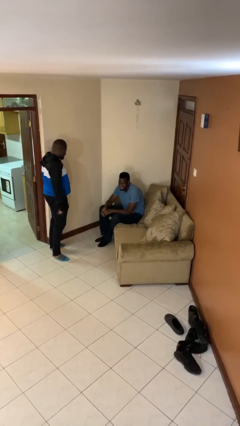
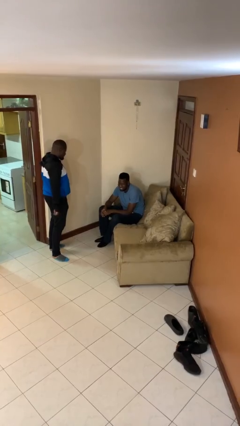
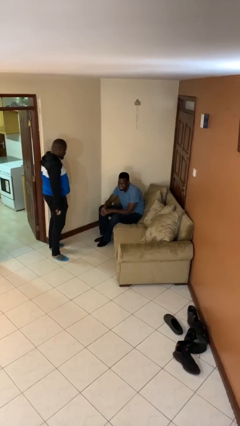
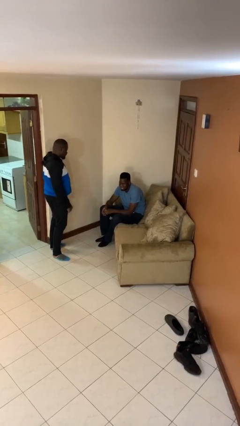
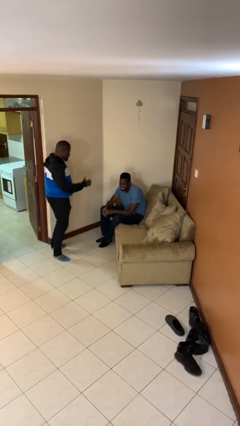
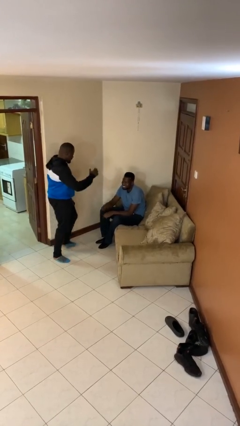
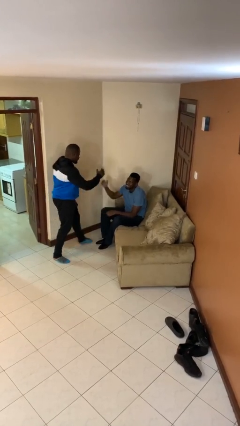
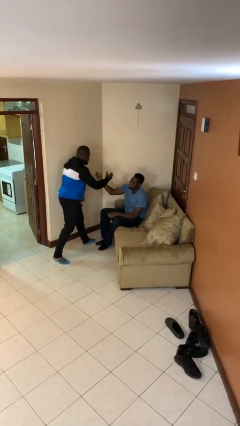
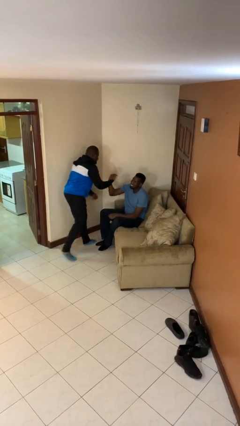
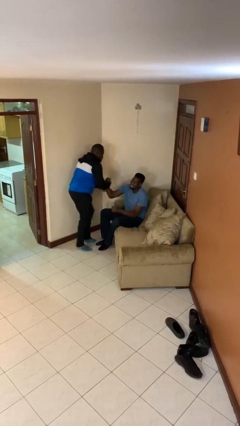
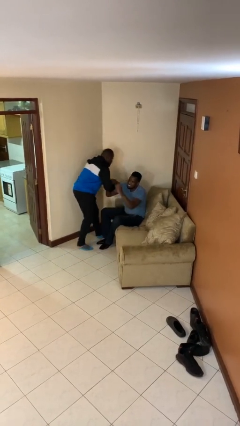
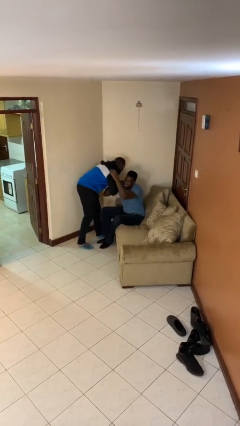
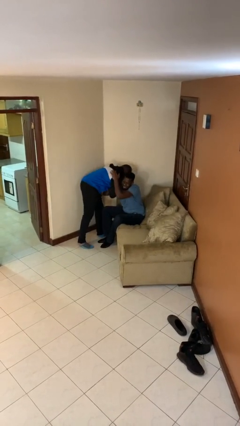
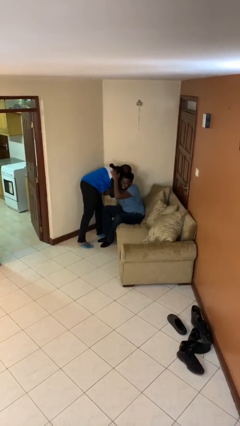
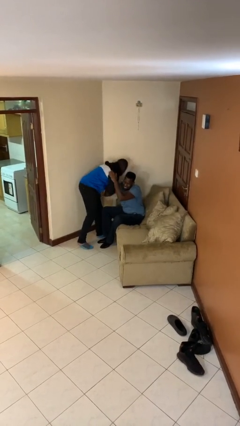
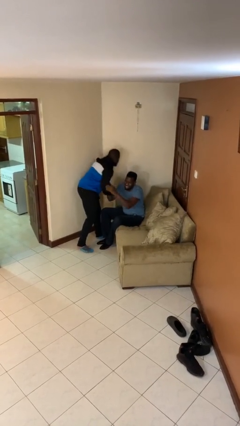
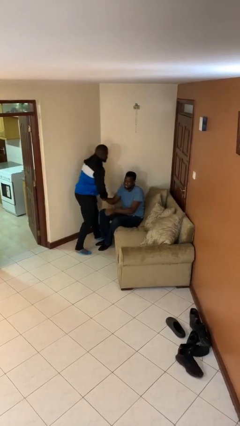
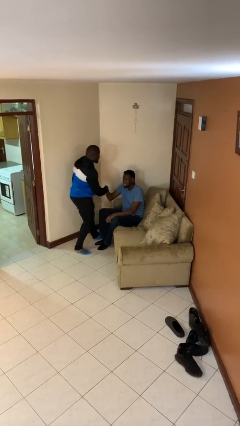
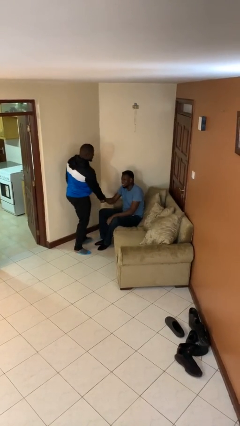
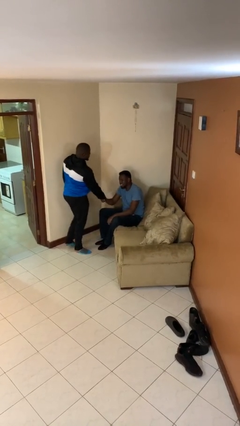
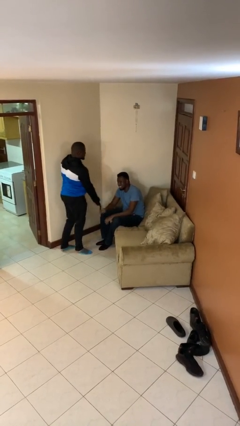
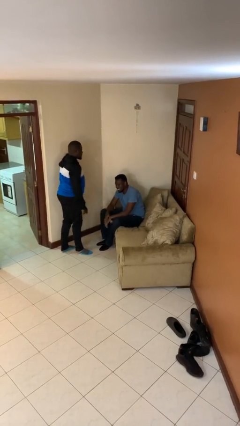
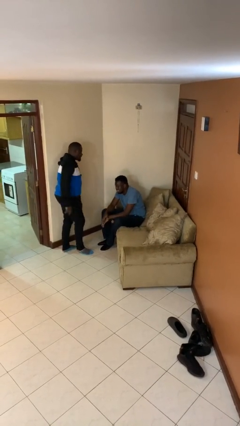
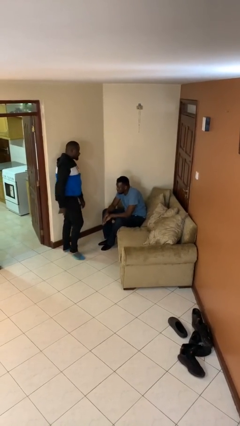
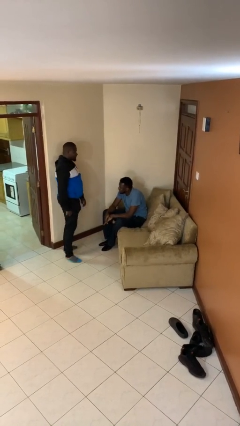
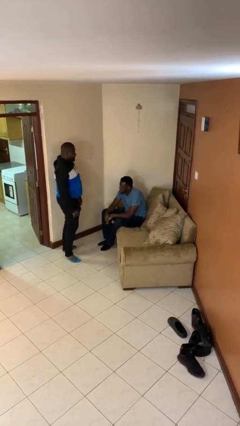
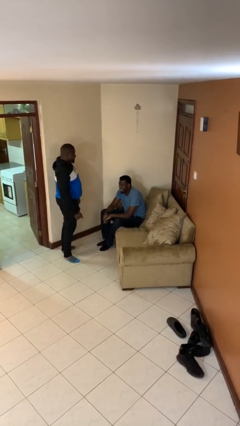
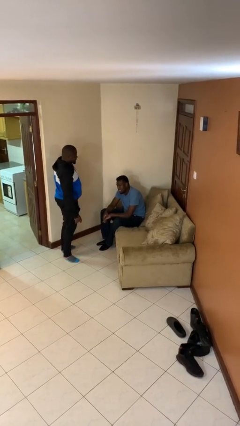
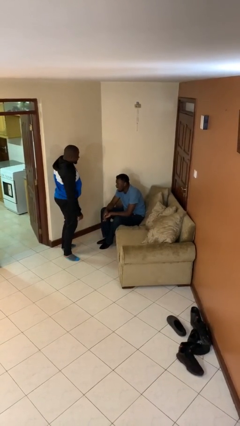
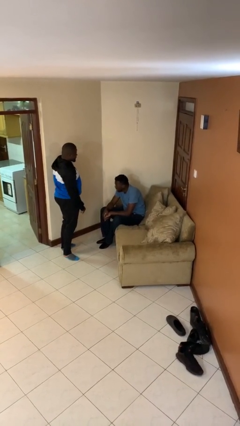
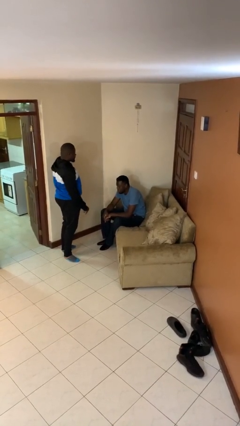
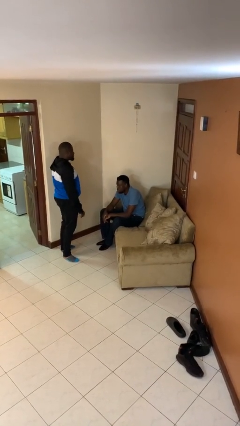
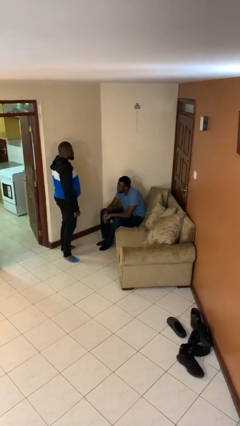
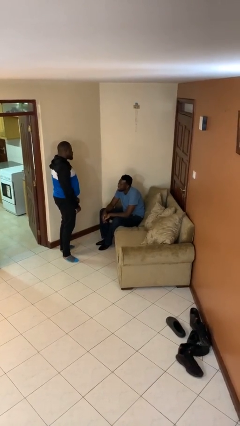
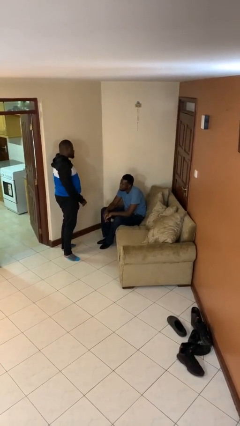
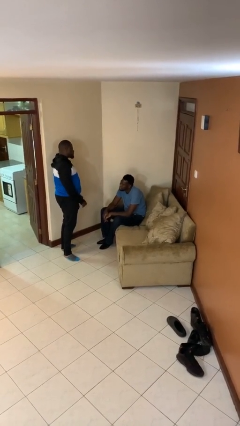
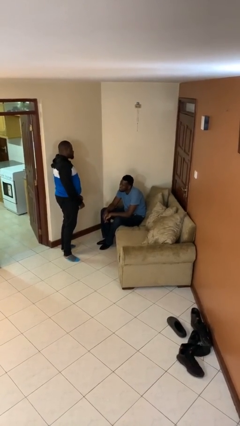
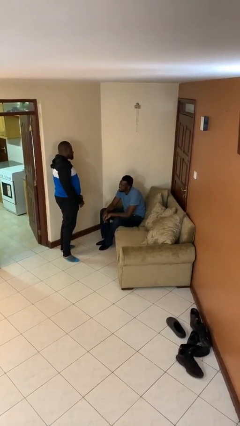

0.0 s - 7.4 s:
person embraces person

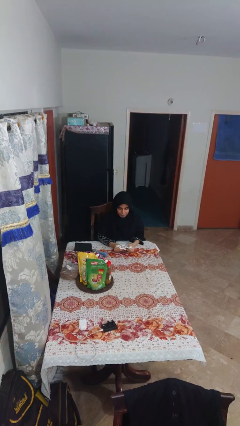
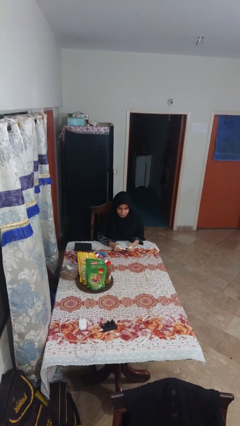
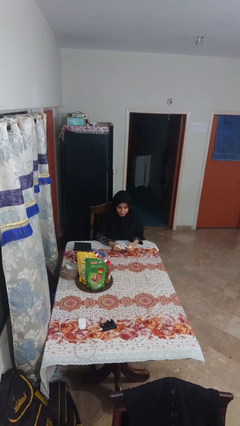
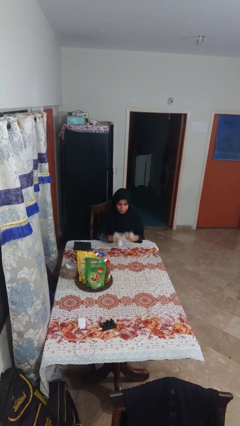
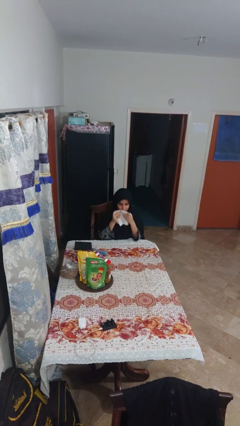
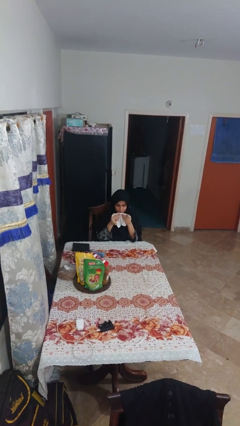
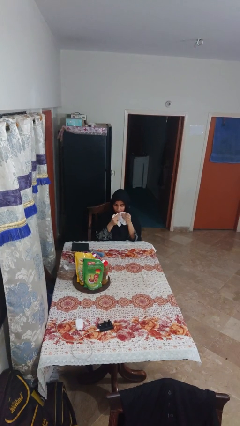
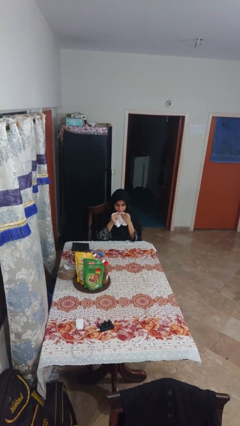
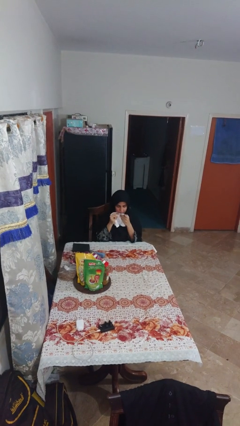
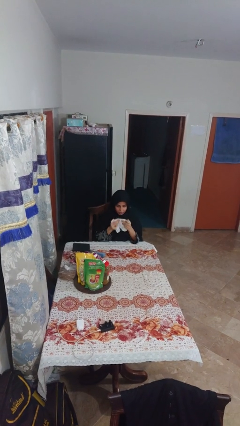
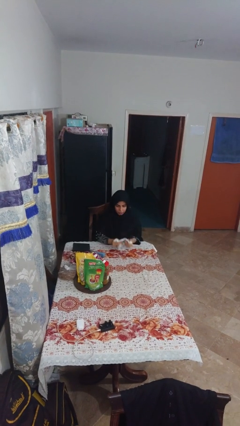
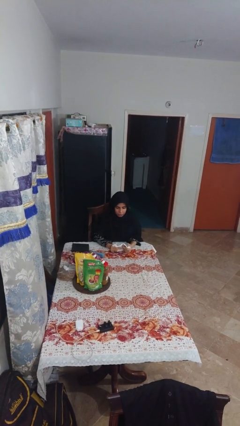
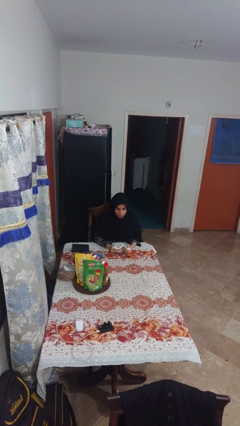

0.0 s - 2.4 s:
person wipes mouth with napkin

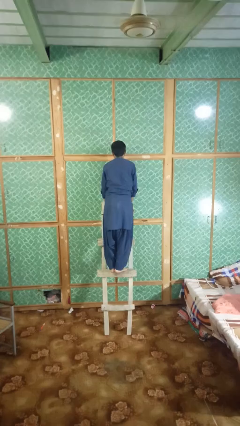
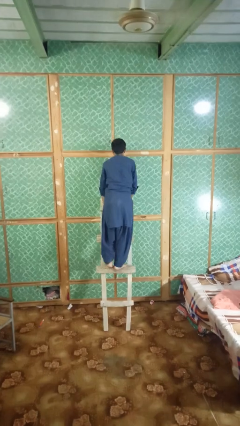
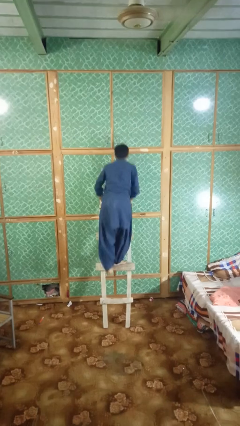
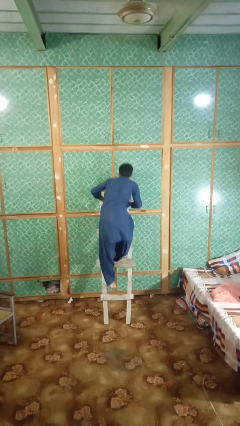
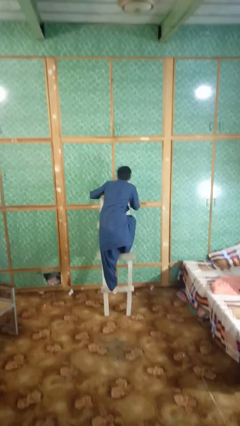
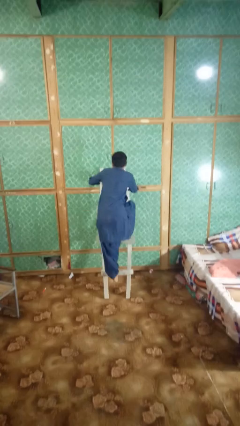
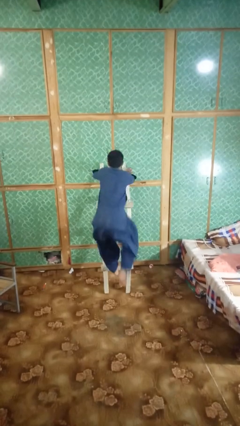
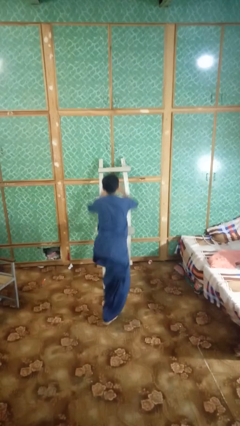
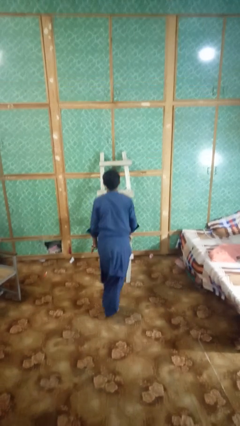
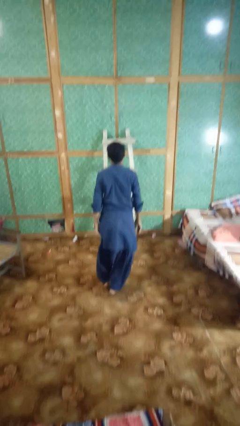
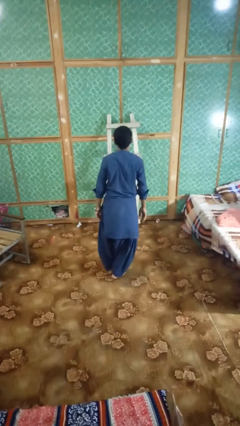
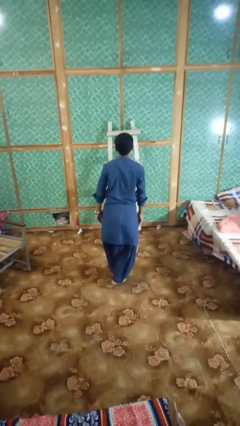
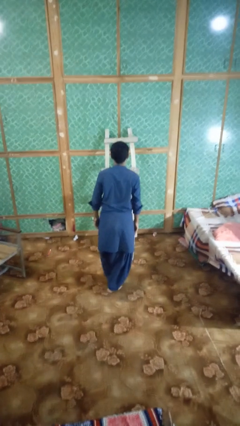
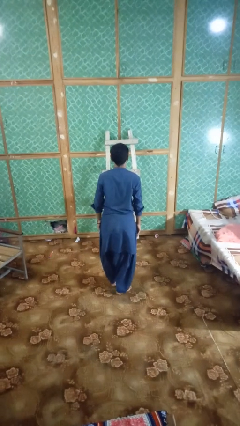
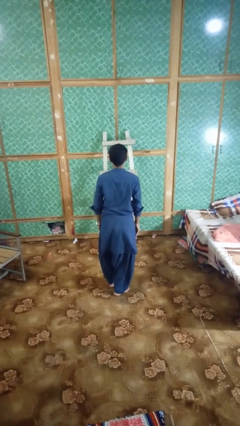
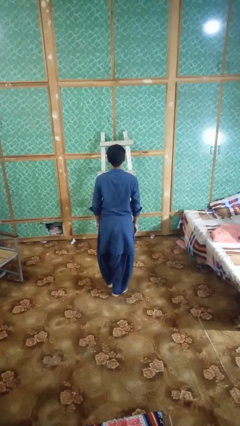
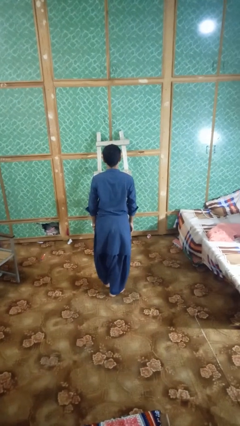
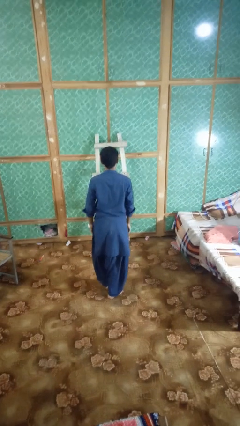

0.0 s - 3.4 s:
person climbs down ladder

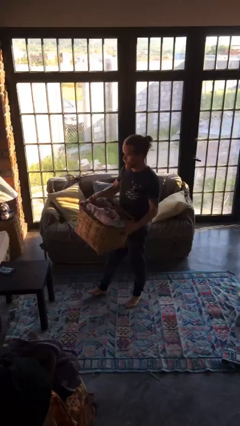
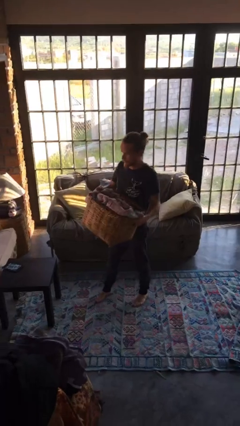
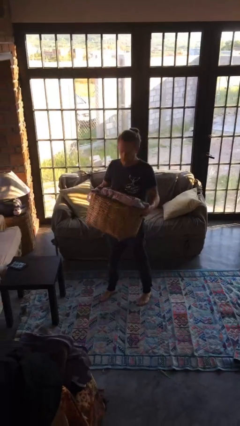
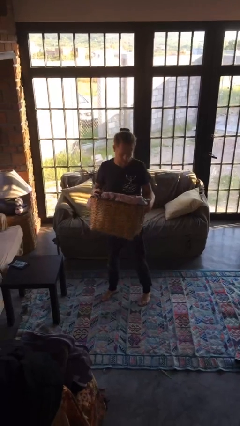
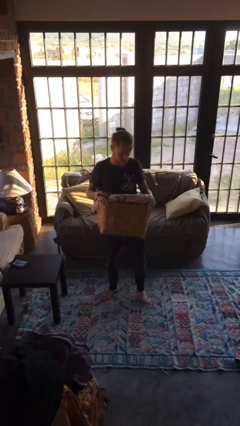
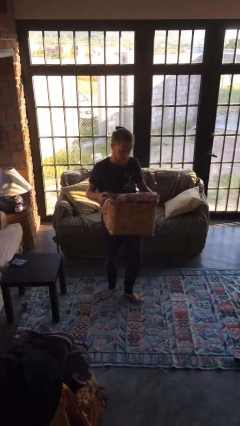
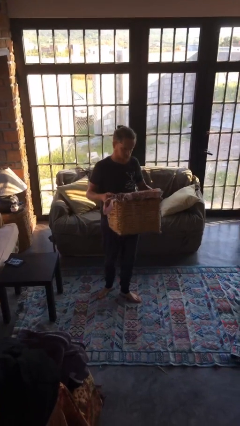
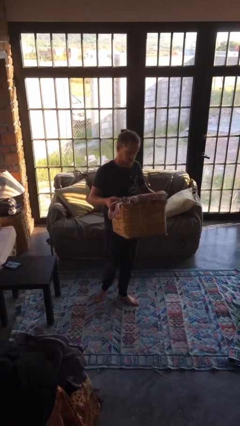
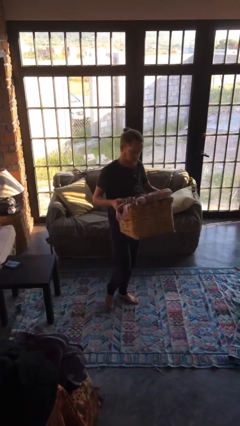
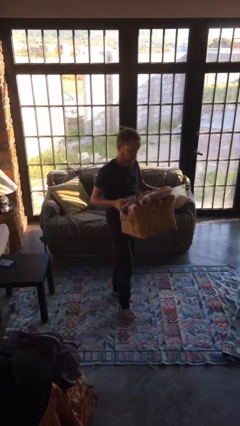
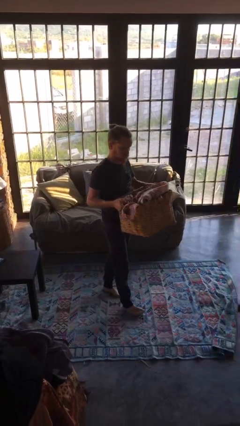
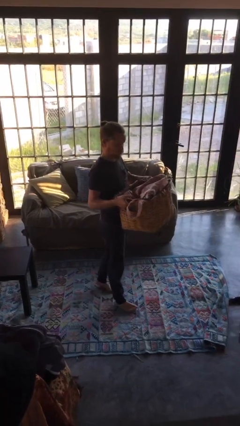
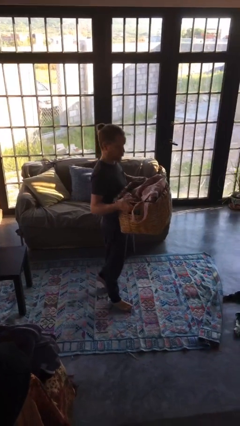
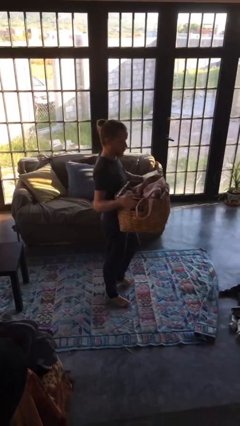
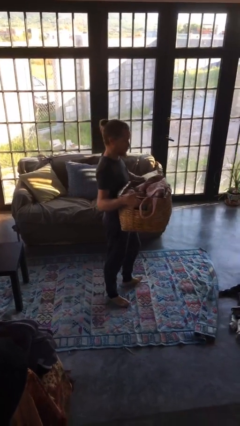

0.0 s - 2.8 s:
person carries laundry basket

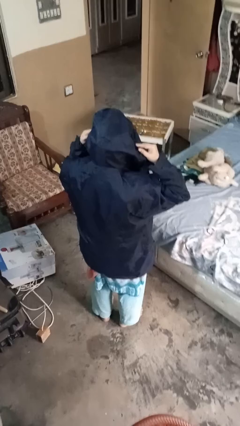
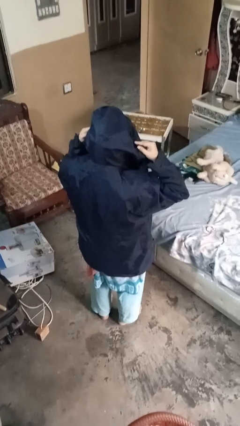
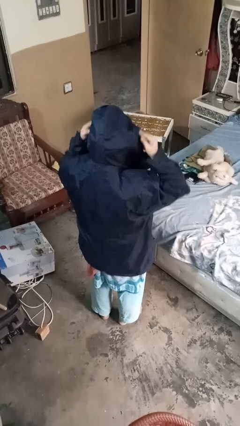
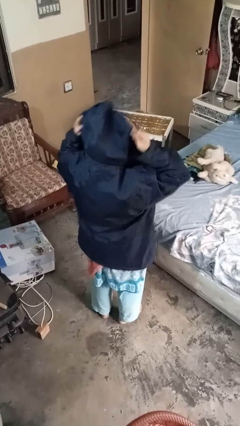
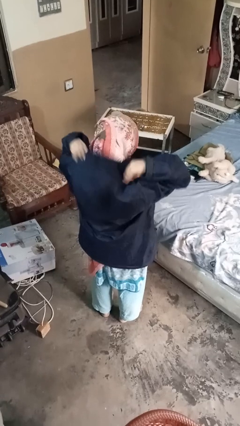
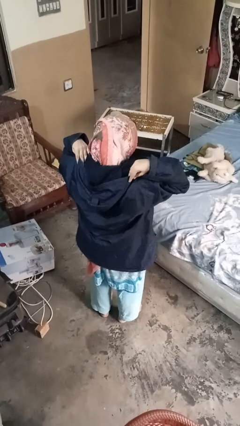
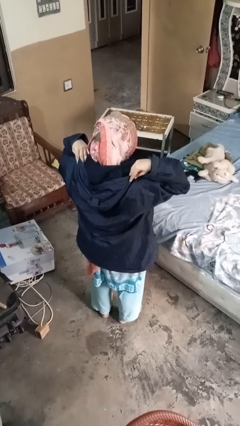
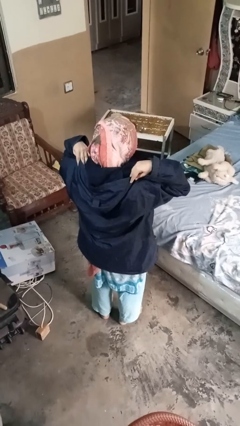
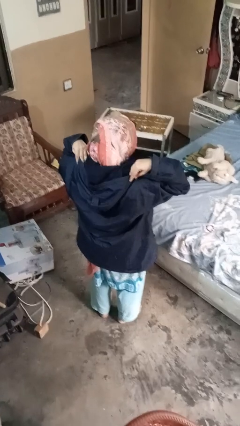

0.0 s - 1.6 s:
person takes off hoodie
